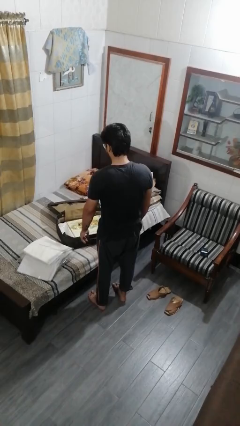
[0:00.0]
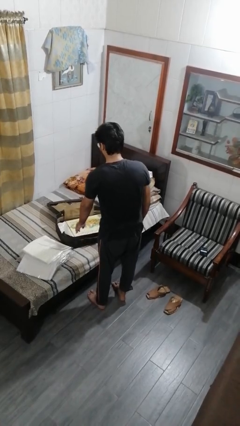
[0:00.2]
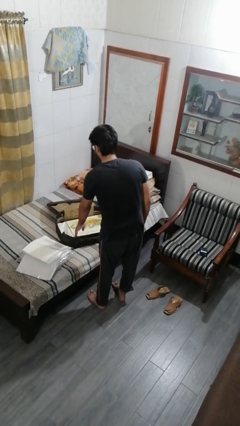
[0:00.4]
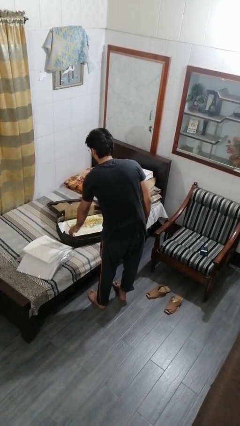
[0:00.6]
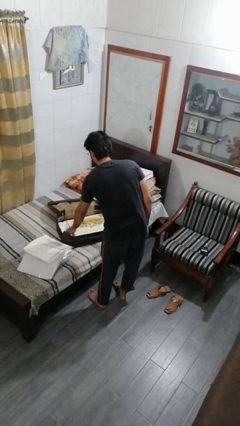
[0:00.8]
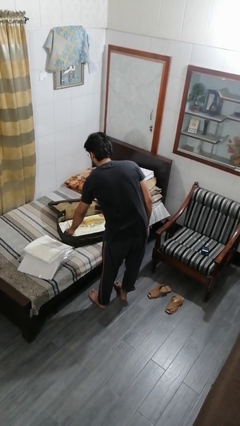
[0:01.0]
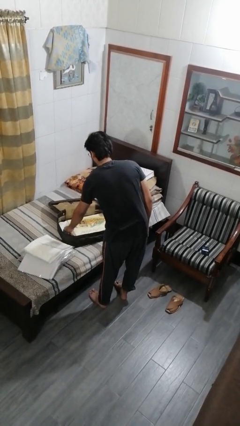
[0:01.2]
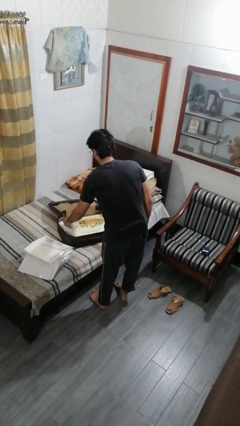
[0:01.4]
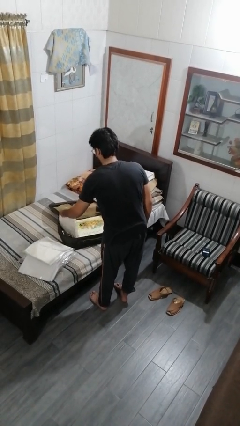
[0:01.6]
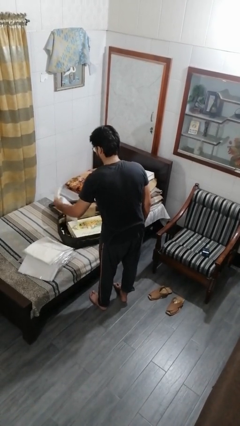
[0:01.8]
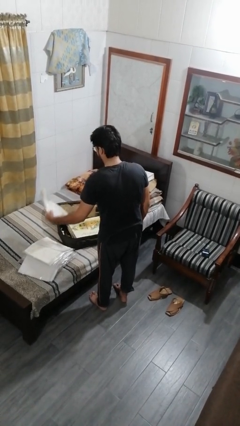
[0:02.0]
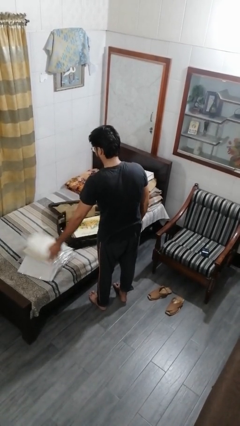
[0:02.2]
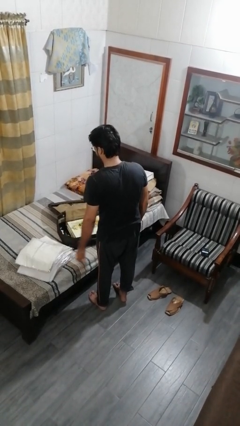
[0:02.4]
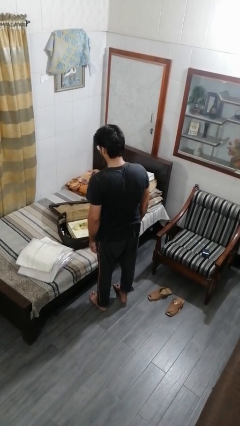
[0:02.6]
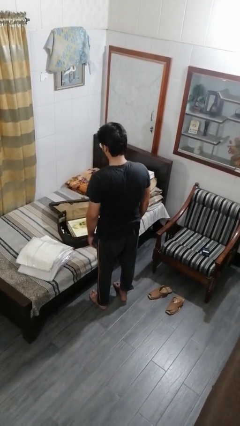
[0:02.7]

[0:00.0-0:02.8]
person unloads clothes from suitcase

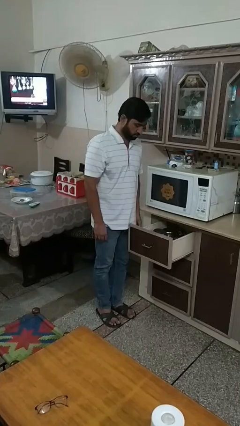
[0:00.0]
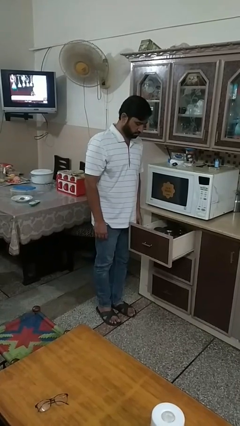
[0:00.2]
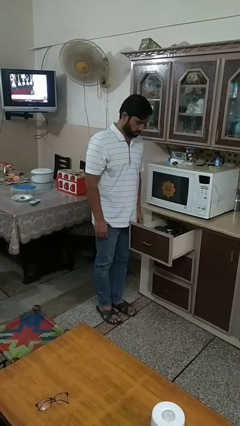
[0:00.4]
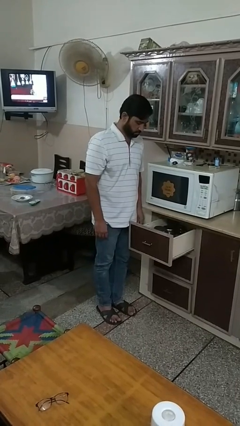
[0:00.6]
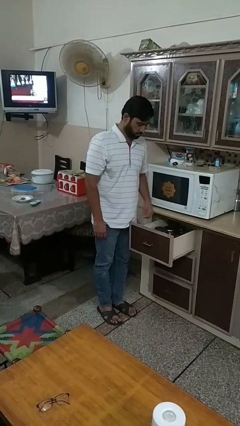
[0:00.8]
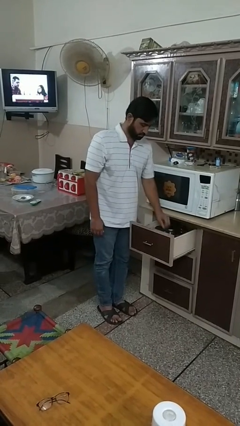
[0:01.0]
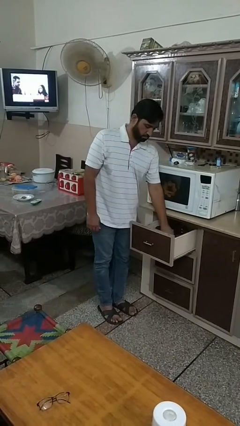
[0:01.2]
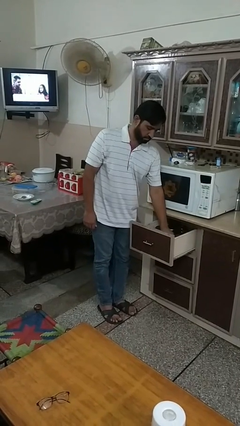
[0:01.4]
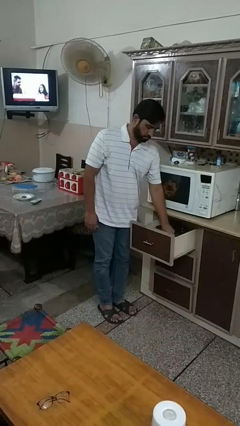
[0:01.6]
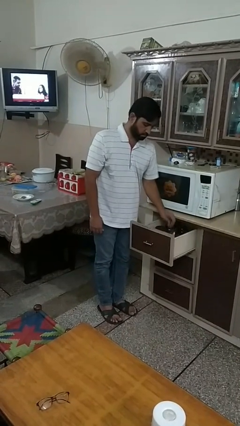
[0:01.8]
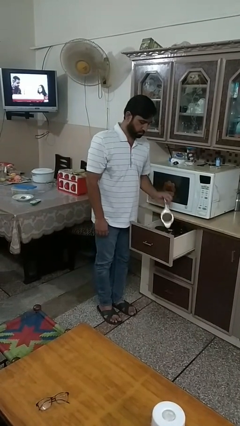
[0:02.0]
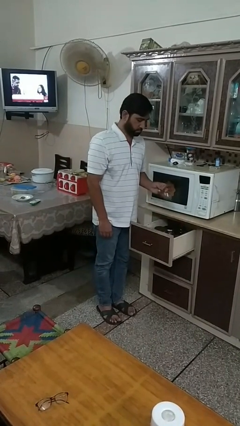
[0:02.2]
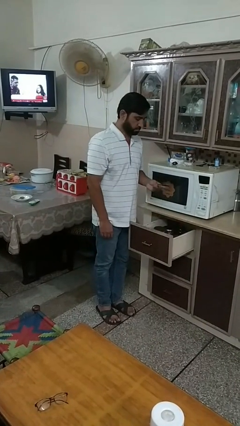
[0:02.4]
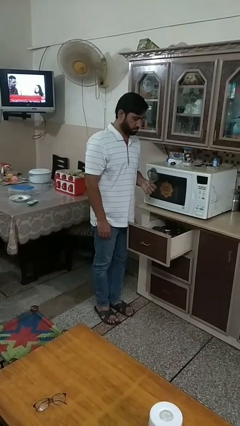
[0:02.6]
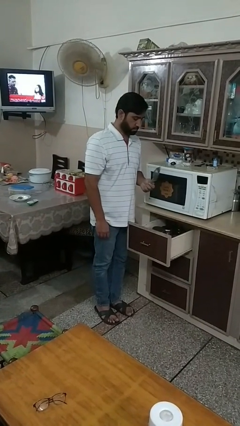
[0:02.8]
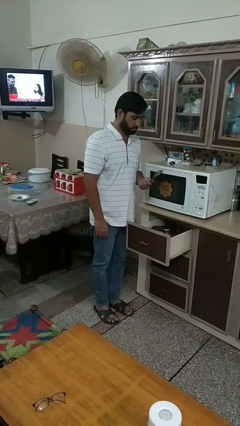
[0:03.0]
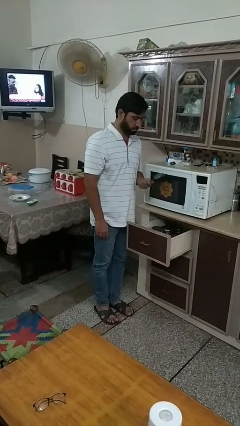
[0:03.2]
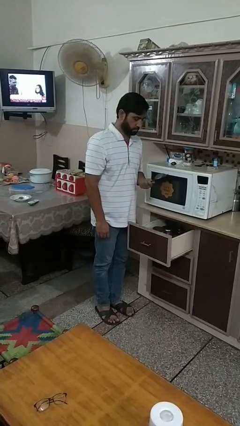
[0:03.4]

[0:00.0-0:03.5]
person takes object from kitchen drawer

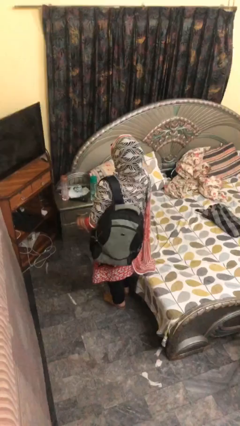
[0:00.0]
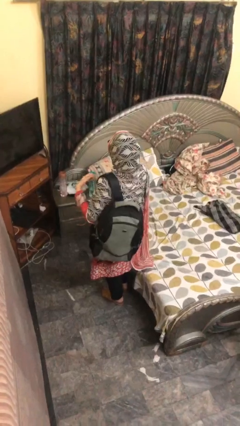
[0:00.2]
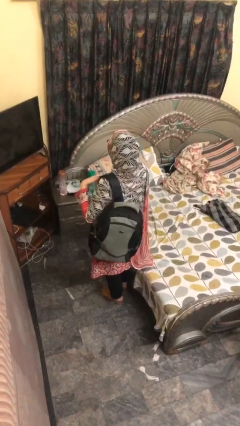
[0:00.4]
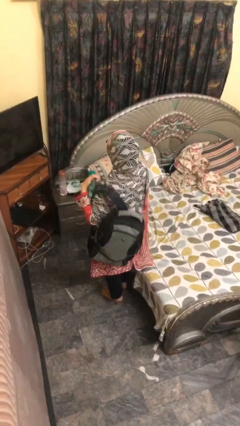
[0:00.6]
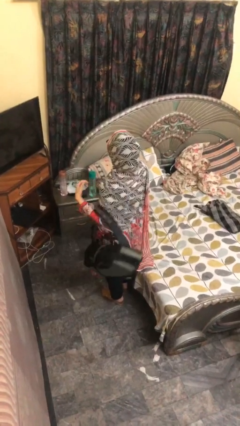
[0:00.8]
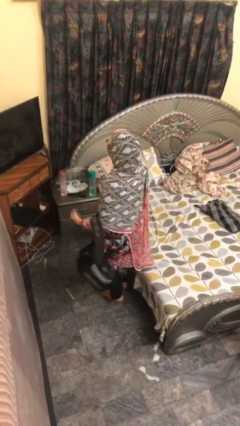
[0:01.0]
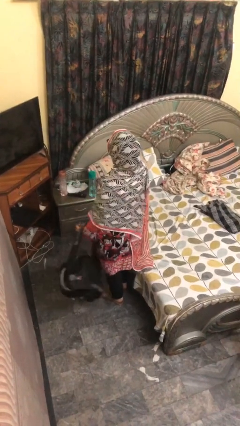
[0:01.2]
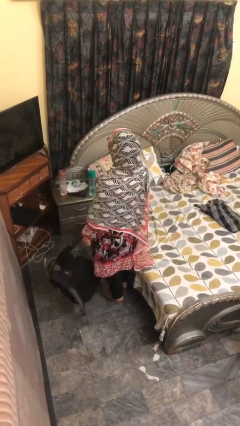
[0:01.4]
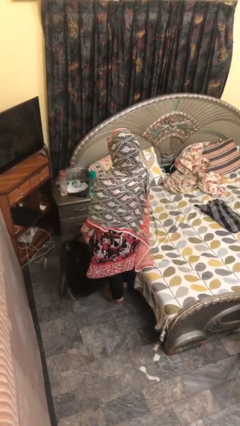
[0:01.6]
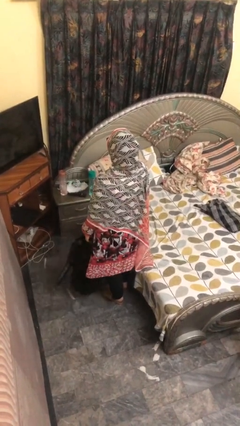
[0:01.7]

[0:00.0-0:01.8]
person takes off backpack

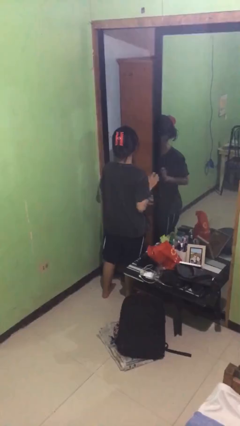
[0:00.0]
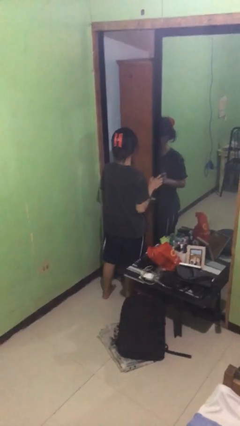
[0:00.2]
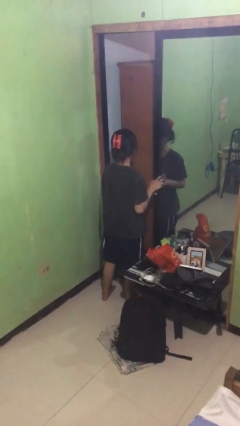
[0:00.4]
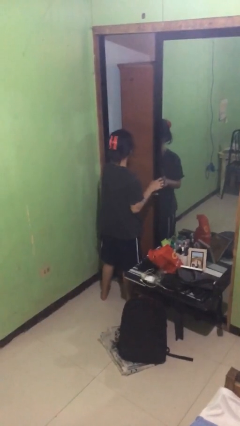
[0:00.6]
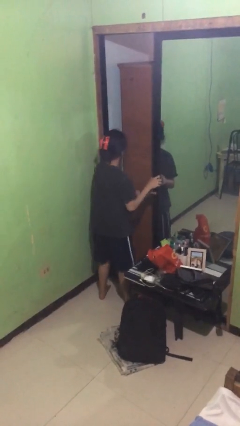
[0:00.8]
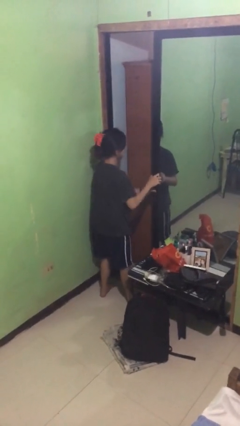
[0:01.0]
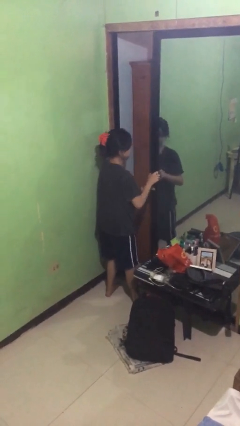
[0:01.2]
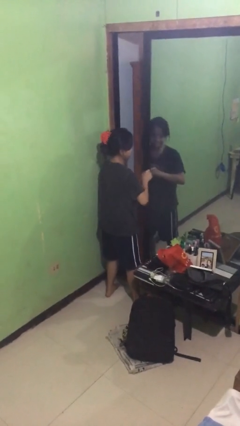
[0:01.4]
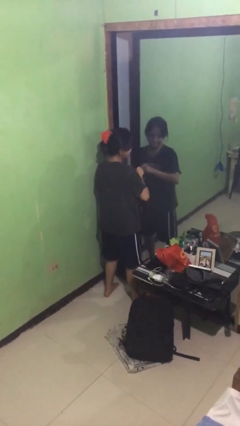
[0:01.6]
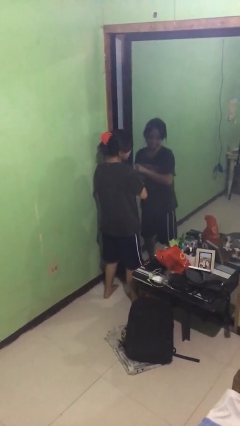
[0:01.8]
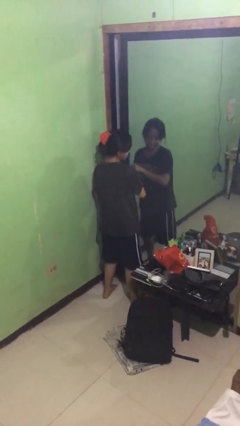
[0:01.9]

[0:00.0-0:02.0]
person closes sliding door

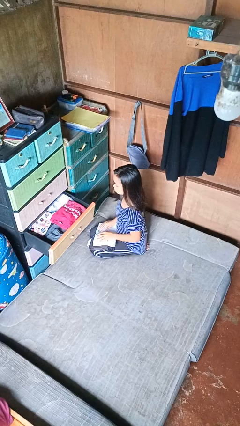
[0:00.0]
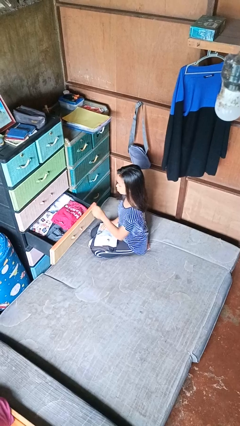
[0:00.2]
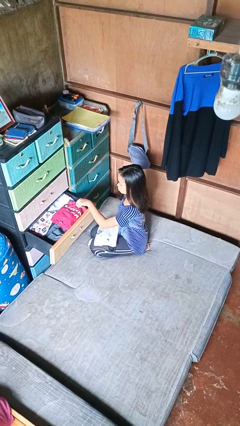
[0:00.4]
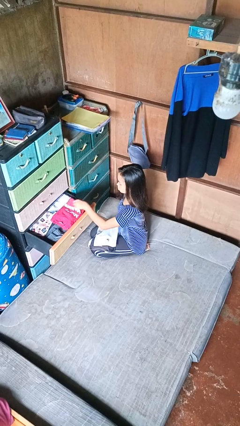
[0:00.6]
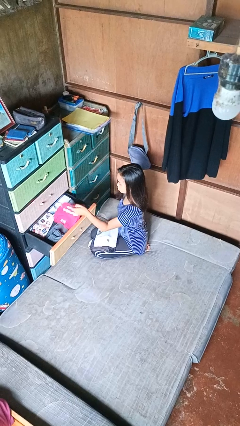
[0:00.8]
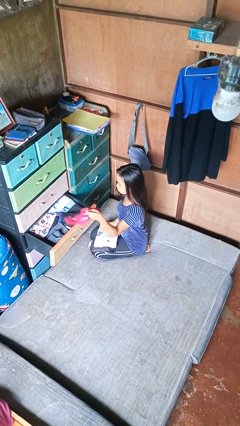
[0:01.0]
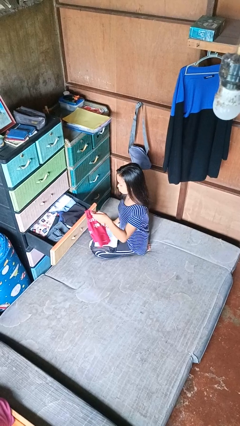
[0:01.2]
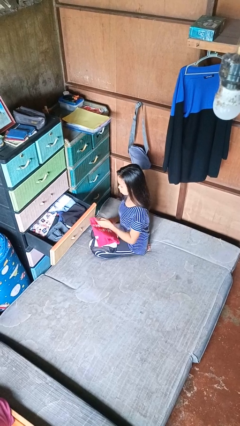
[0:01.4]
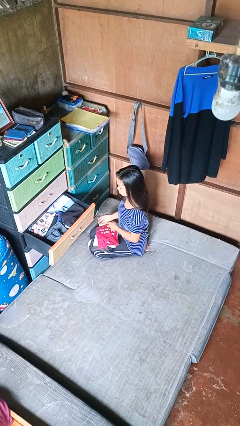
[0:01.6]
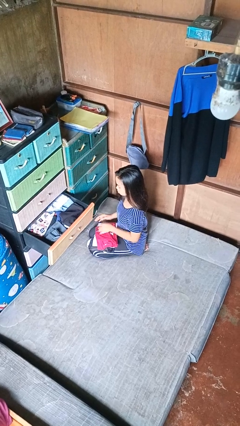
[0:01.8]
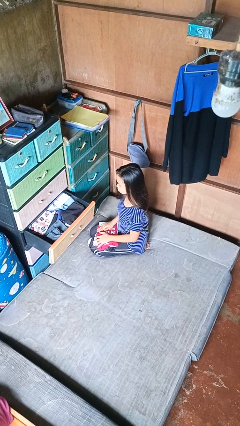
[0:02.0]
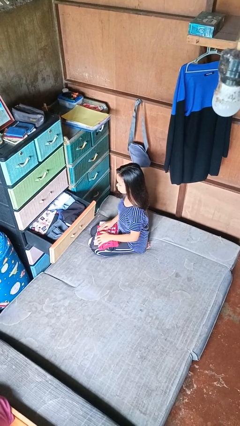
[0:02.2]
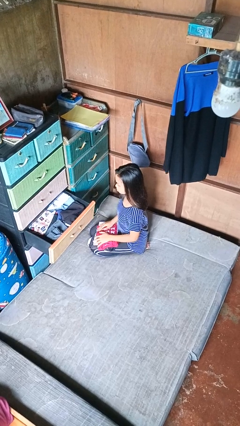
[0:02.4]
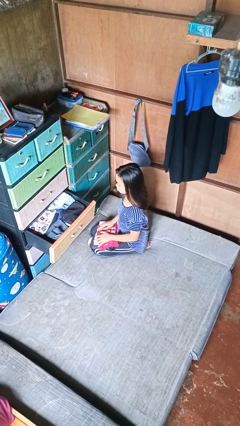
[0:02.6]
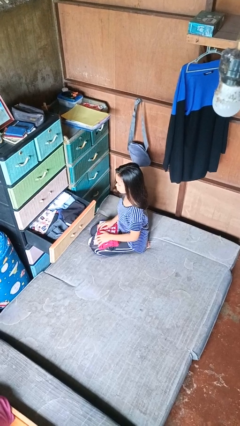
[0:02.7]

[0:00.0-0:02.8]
person takes clothes from dresser

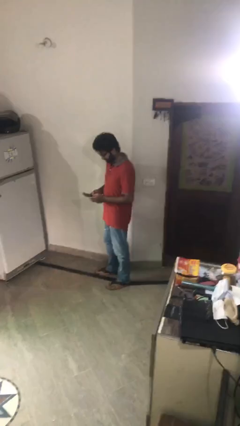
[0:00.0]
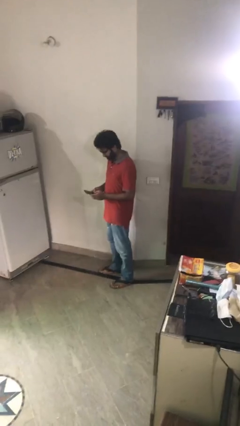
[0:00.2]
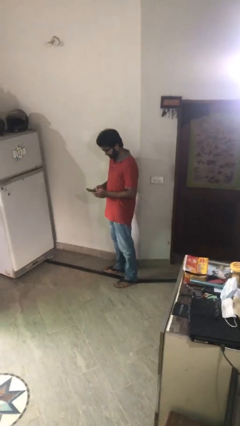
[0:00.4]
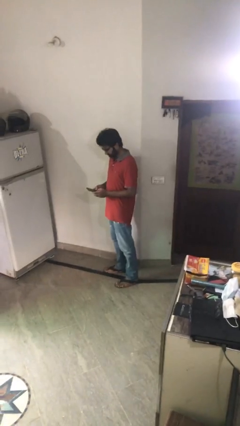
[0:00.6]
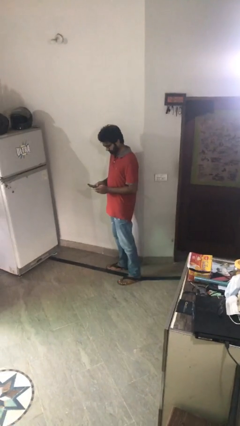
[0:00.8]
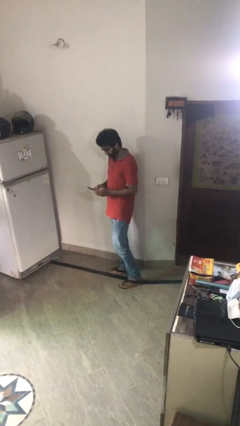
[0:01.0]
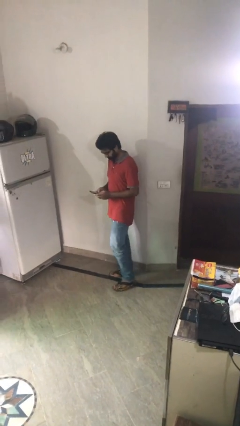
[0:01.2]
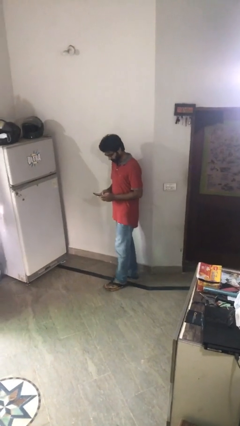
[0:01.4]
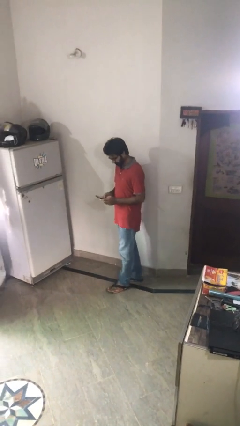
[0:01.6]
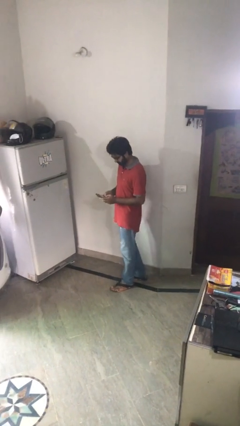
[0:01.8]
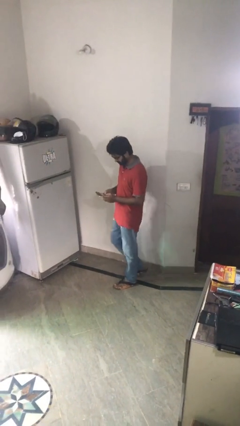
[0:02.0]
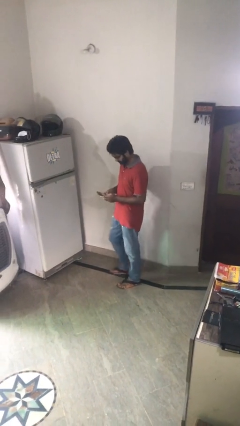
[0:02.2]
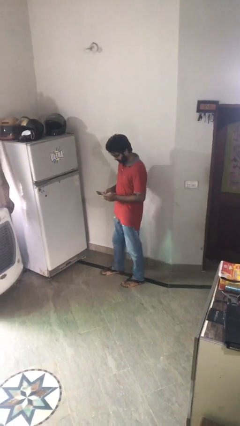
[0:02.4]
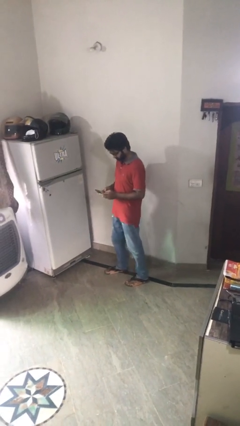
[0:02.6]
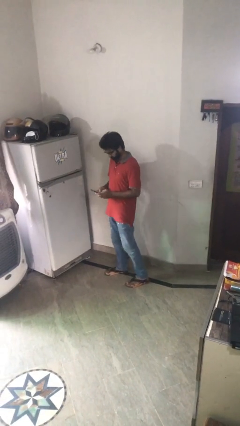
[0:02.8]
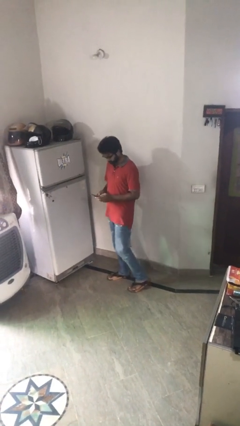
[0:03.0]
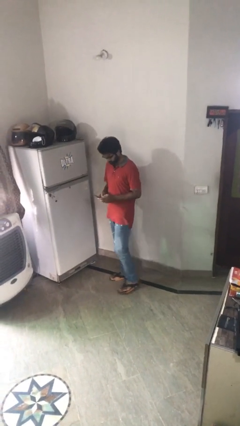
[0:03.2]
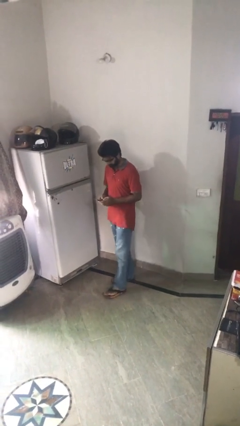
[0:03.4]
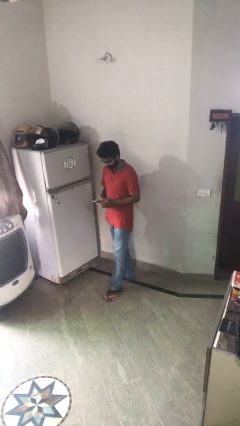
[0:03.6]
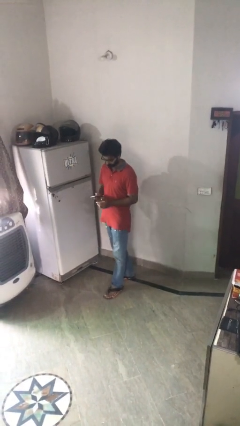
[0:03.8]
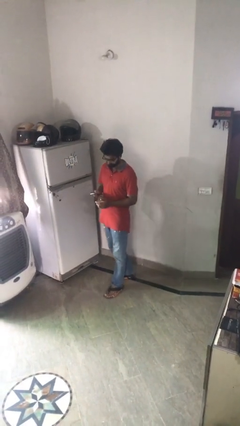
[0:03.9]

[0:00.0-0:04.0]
person texts on phone
